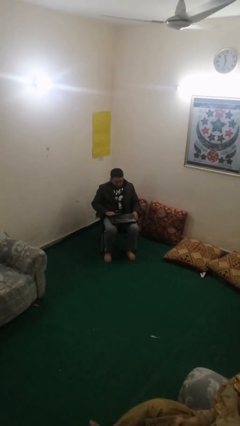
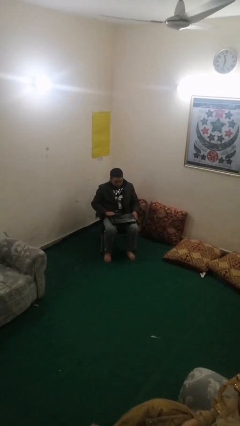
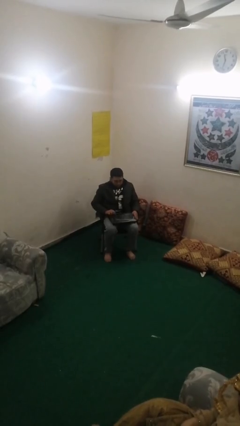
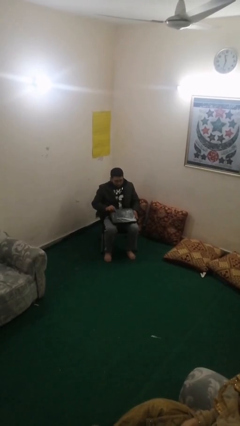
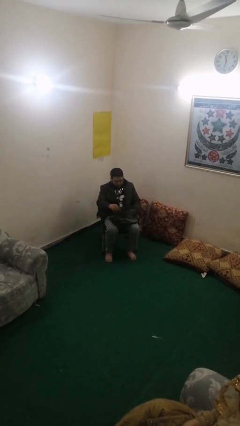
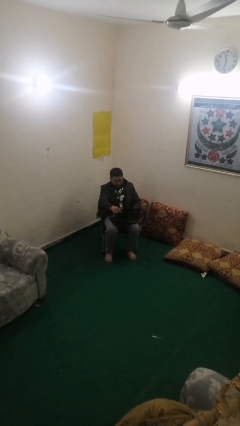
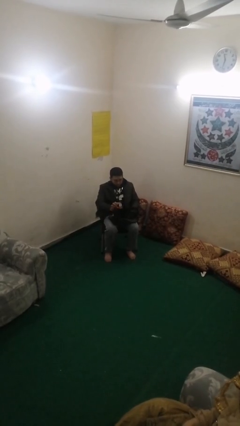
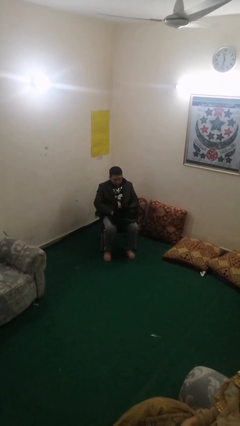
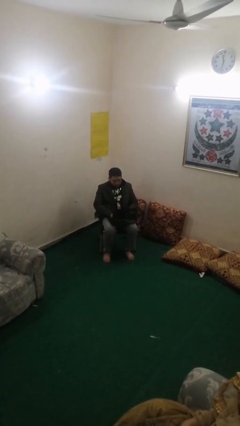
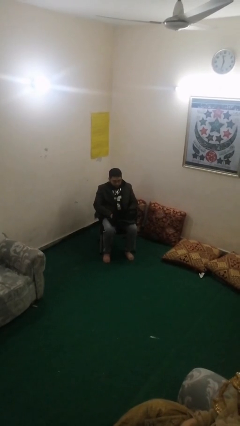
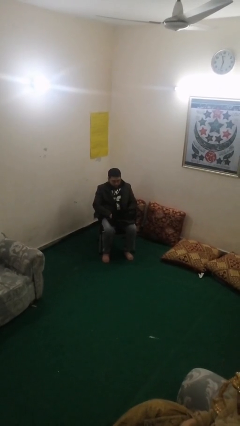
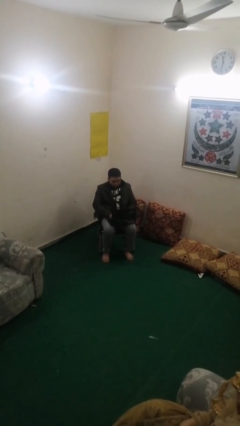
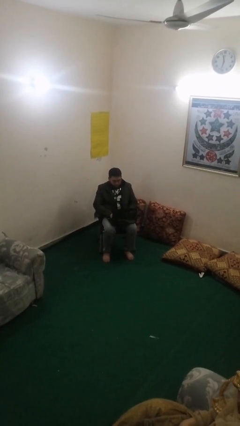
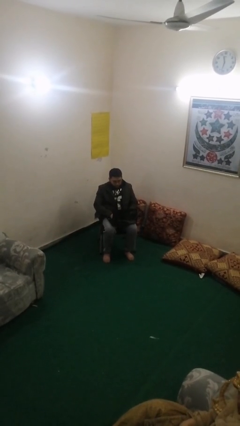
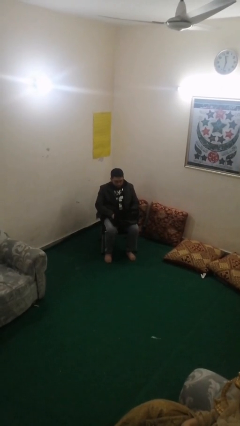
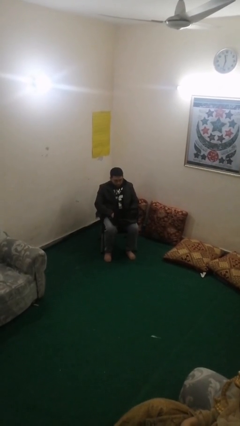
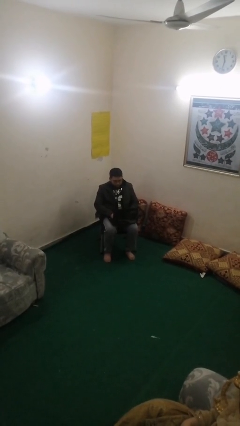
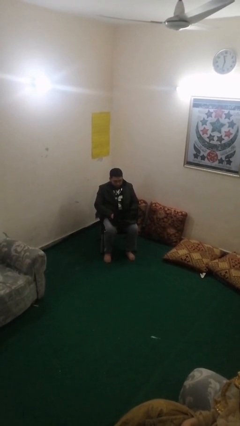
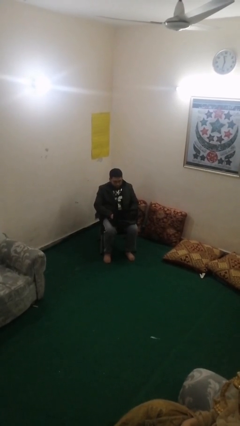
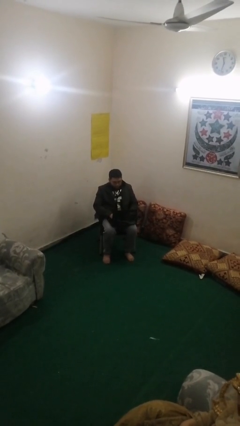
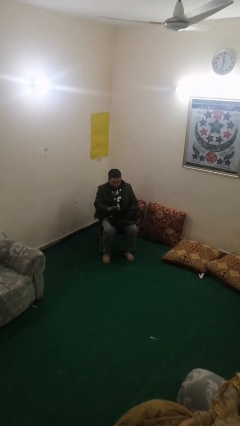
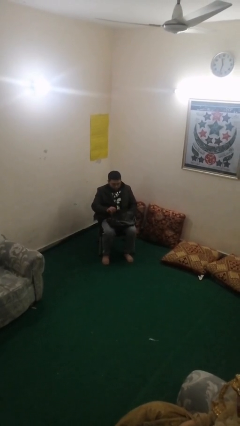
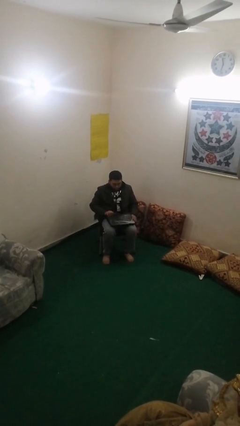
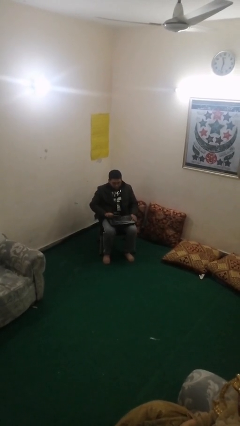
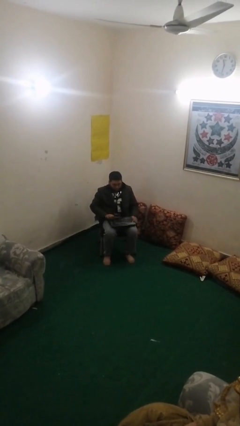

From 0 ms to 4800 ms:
person interacts with laptop

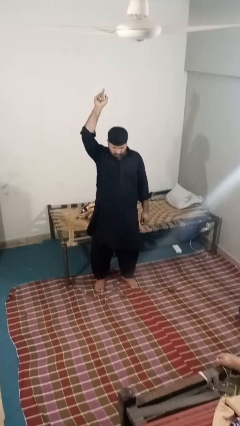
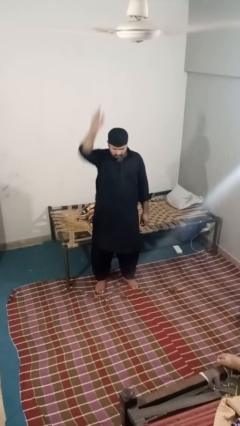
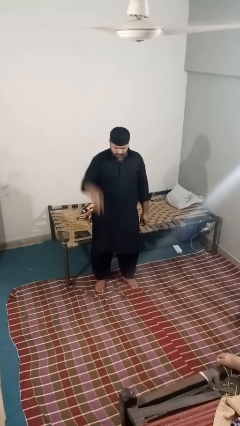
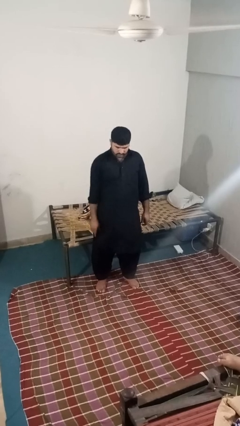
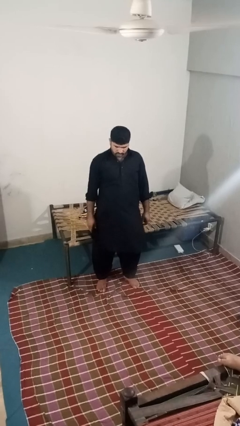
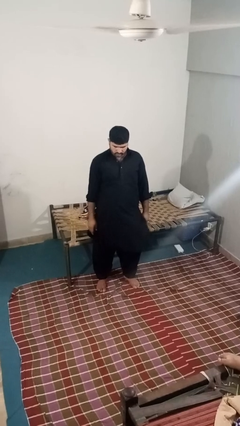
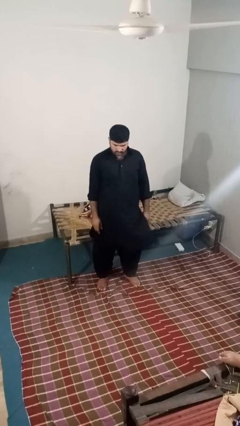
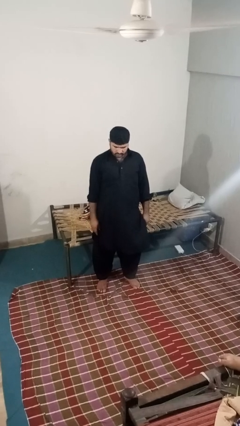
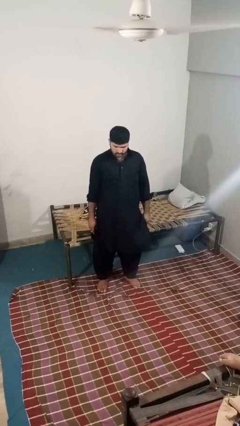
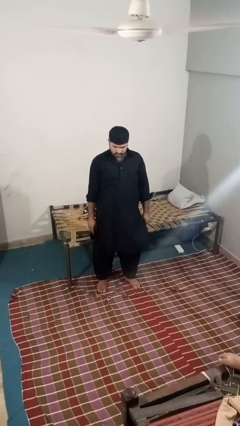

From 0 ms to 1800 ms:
person gestures swipe down

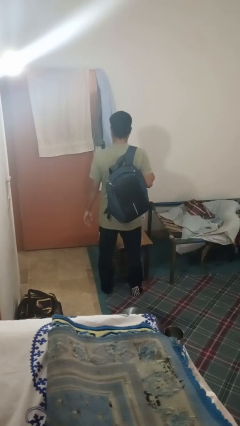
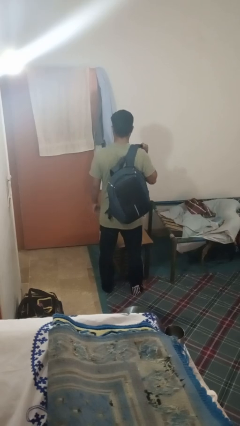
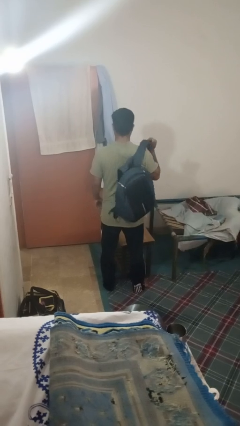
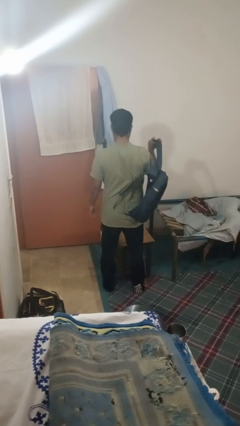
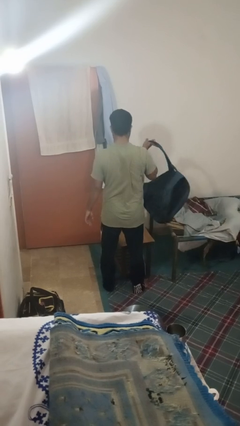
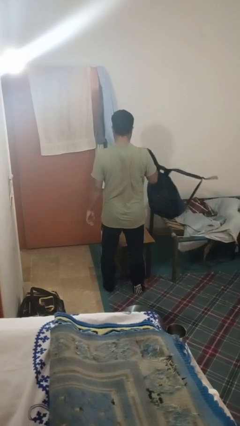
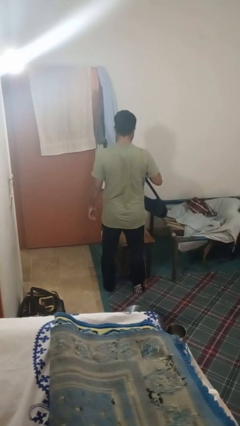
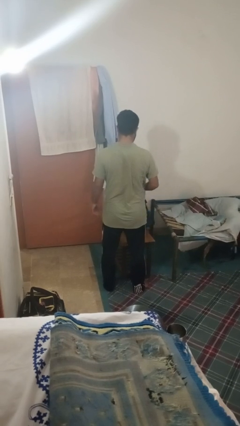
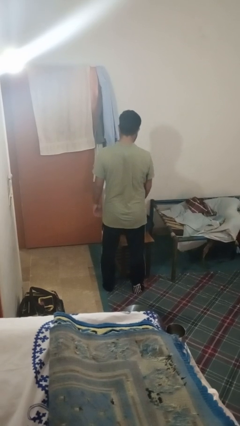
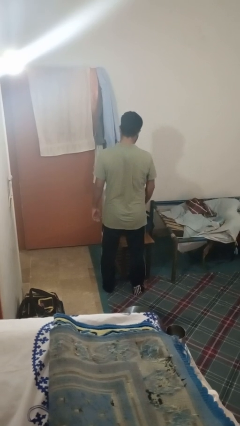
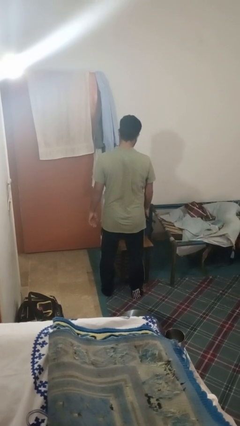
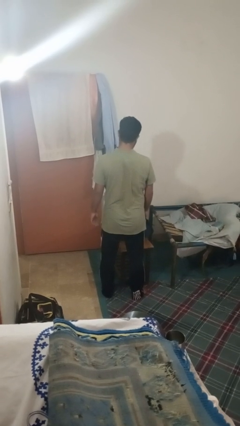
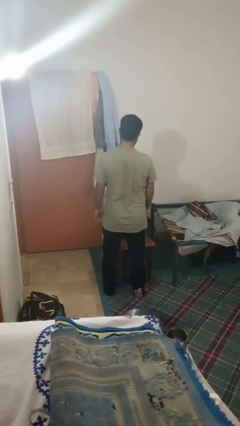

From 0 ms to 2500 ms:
person takes off backpack

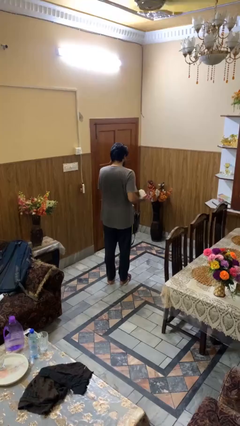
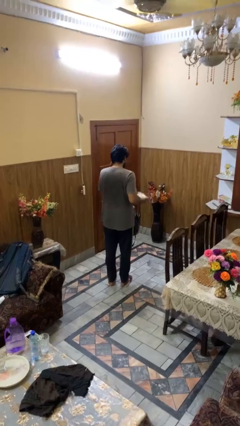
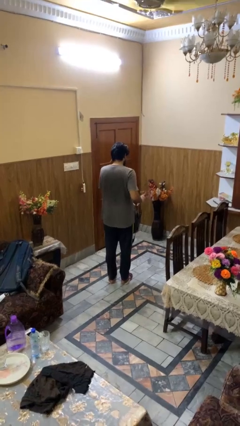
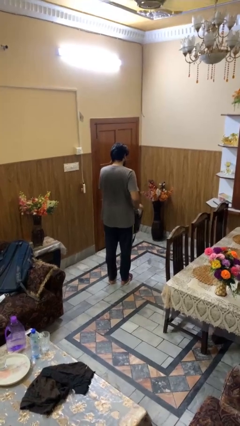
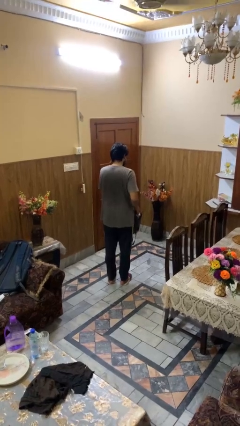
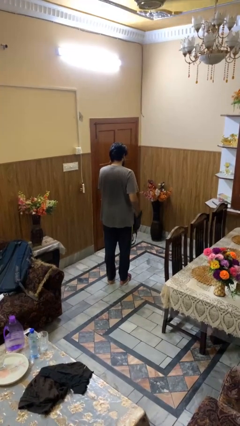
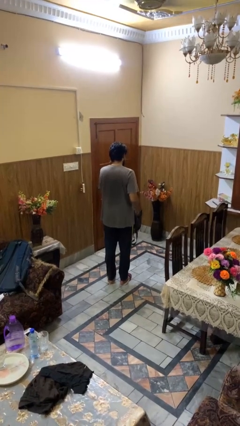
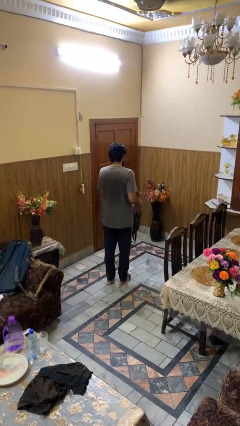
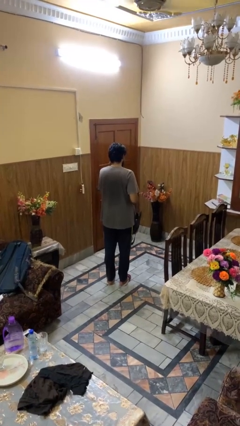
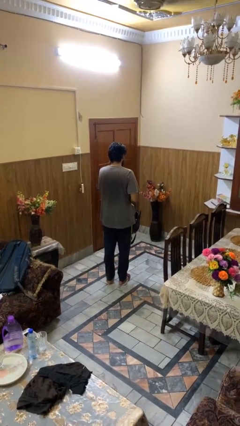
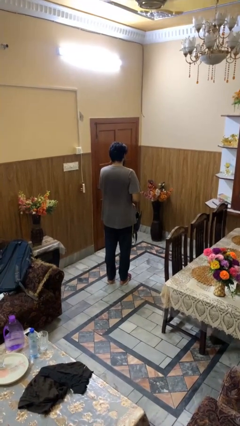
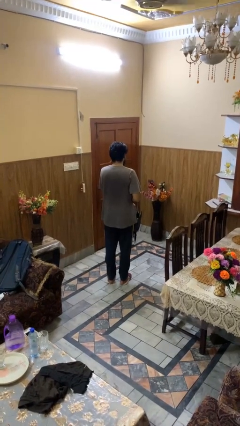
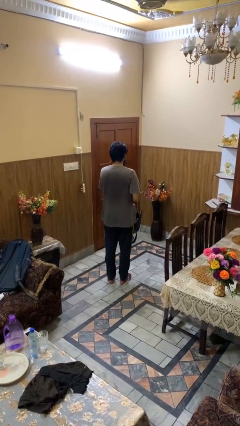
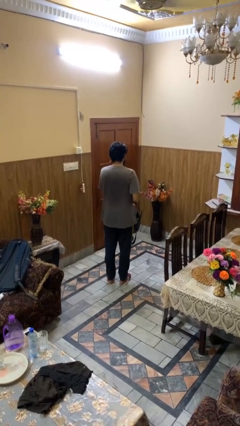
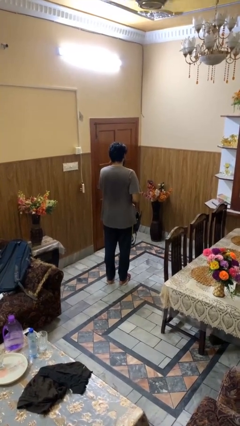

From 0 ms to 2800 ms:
person puts object into purse

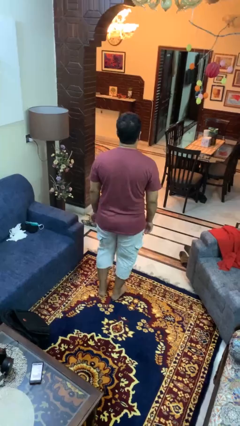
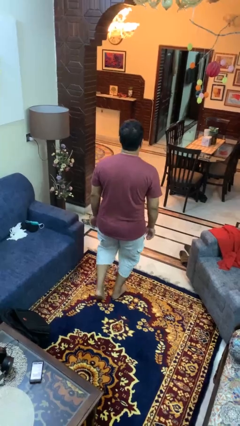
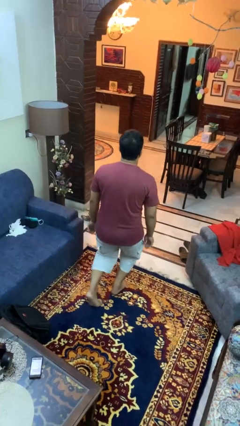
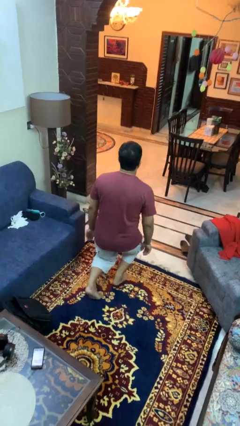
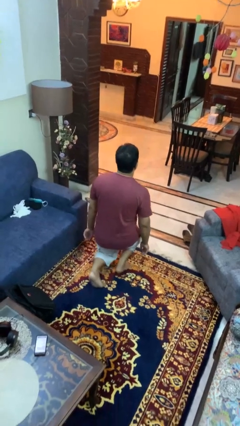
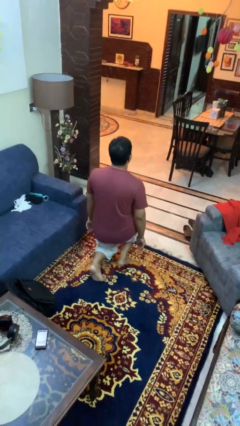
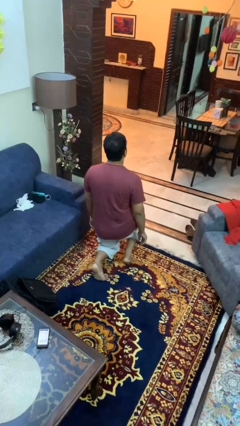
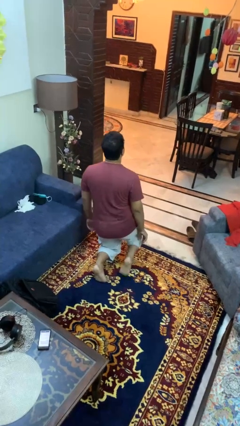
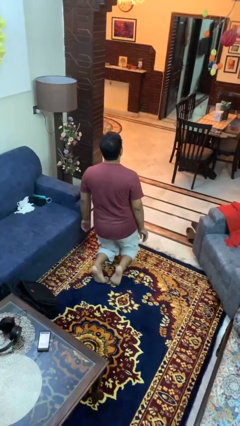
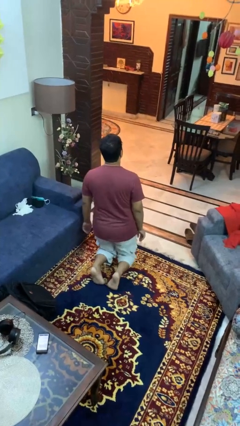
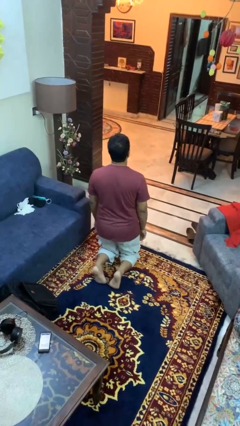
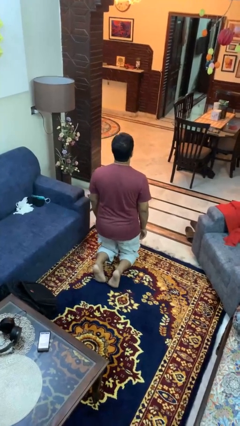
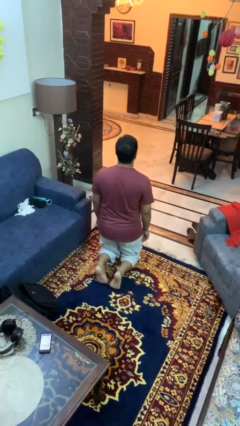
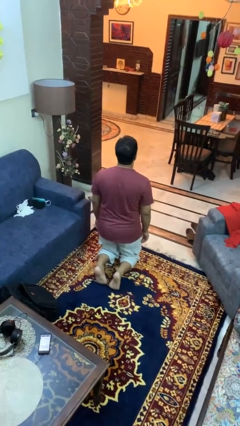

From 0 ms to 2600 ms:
person kneels

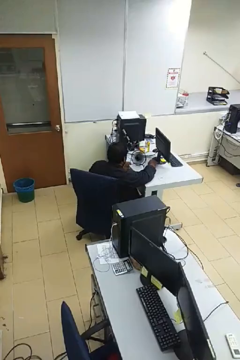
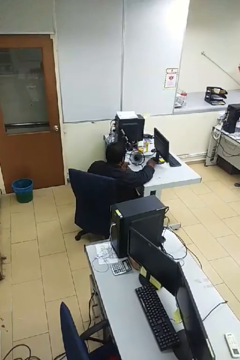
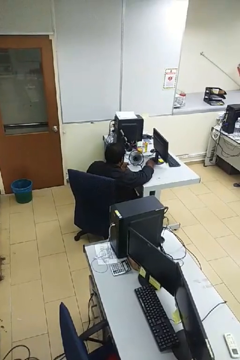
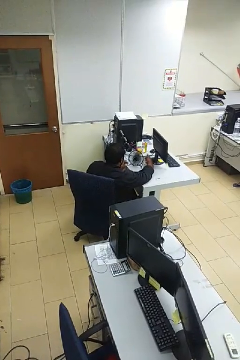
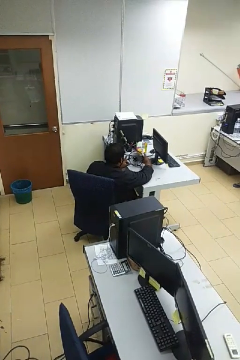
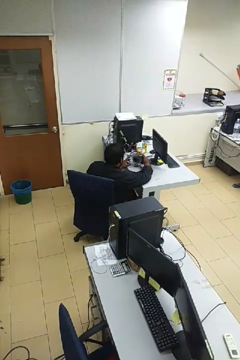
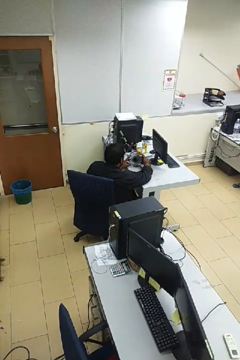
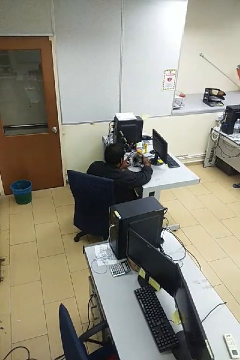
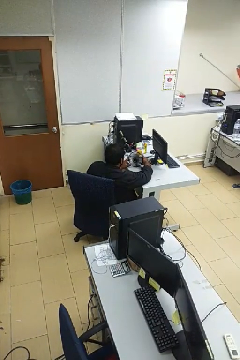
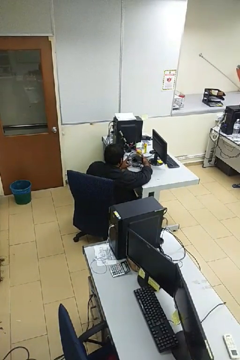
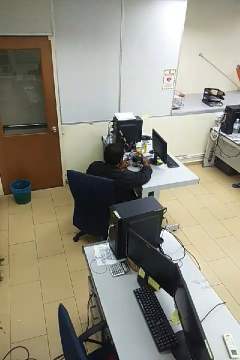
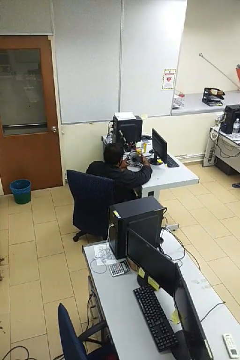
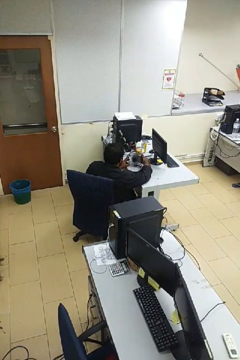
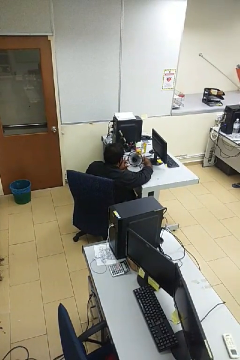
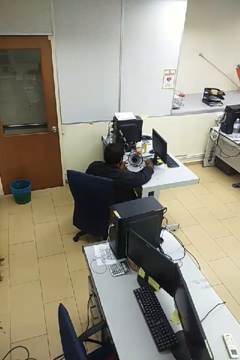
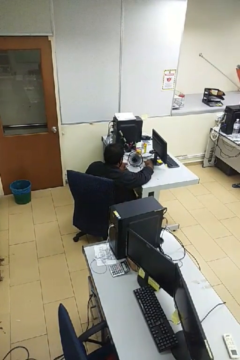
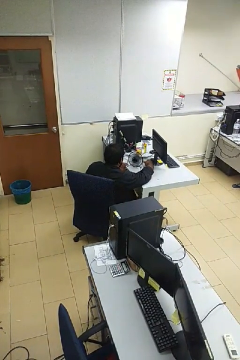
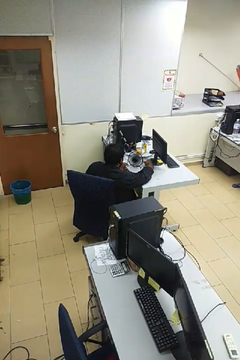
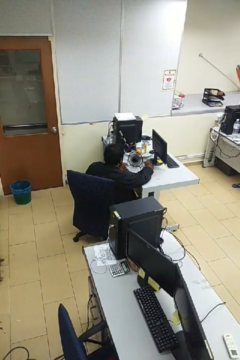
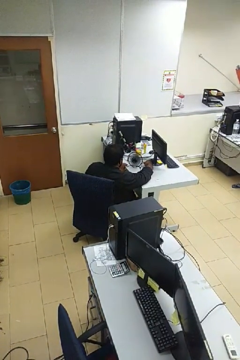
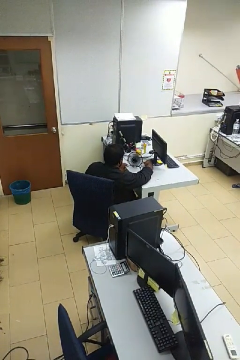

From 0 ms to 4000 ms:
person turns on fan
